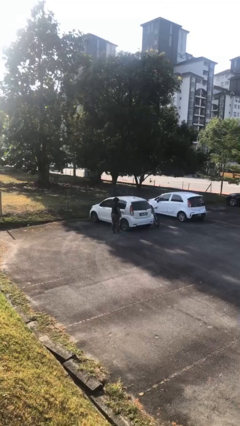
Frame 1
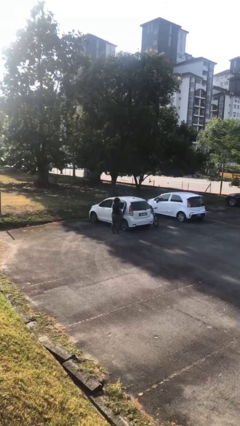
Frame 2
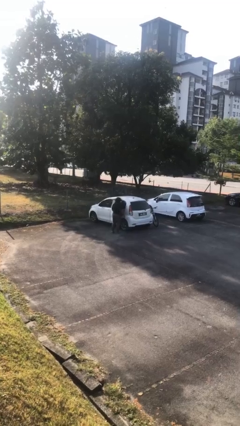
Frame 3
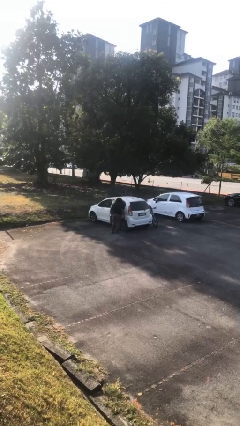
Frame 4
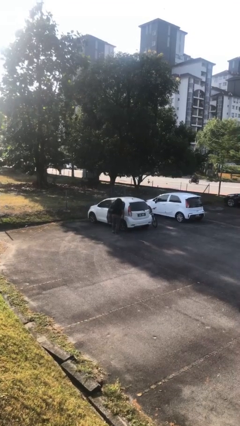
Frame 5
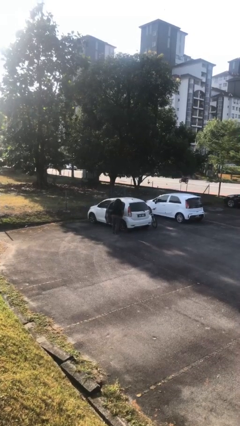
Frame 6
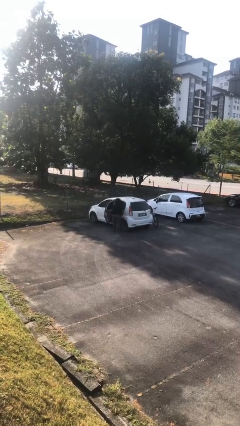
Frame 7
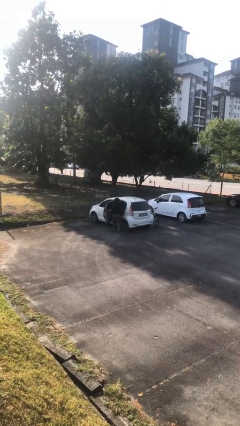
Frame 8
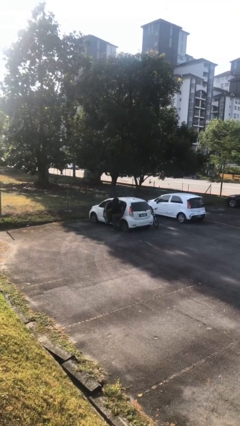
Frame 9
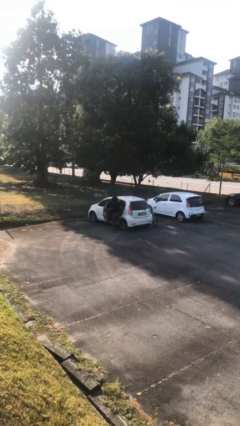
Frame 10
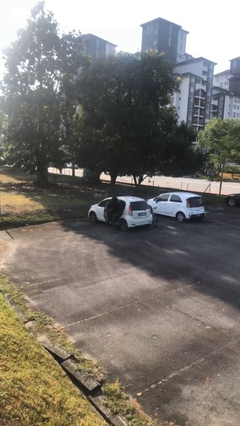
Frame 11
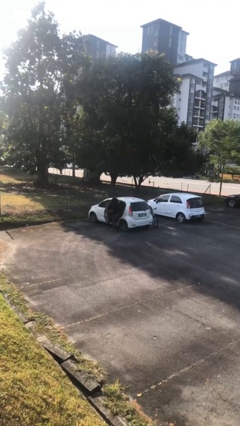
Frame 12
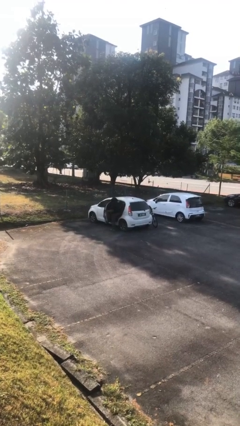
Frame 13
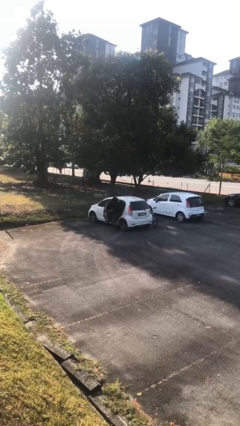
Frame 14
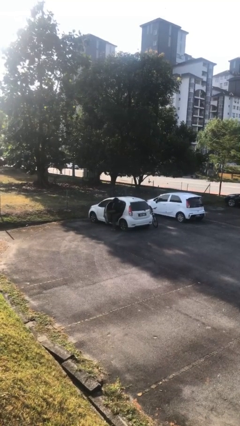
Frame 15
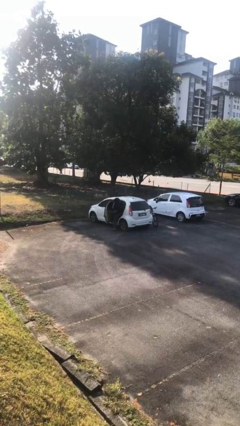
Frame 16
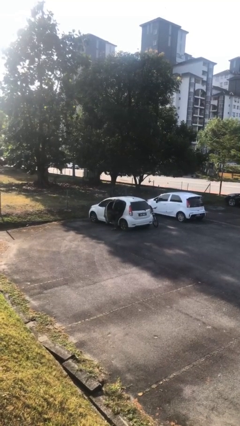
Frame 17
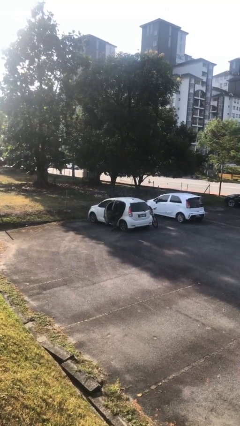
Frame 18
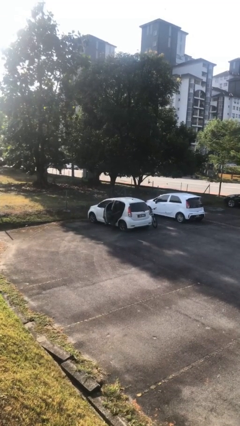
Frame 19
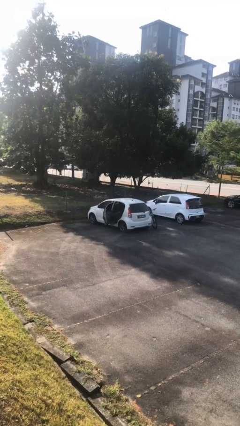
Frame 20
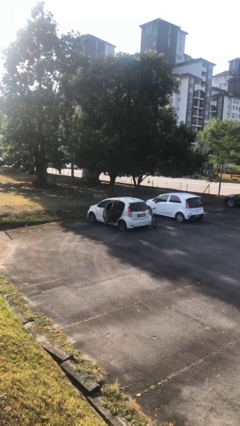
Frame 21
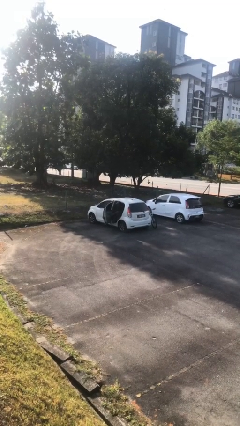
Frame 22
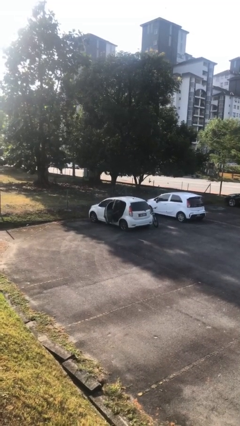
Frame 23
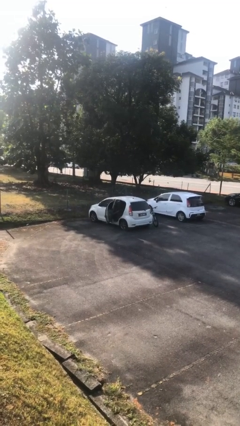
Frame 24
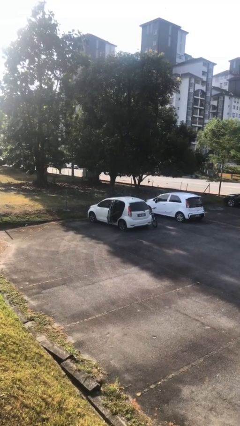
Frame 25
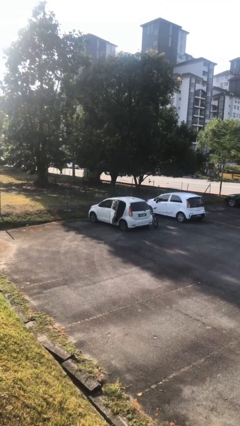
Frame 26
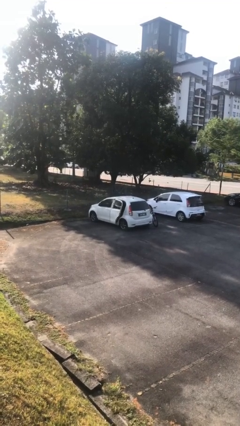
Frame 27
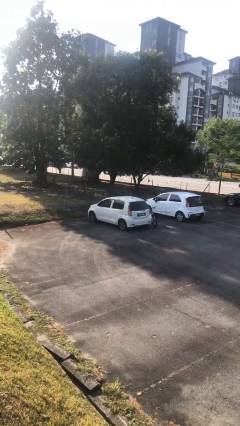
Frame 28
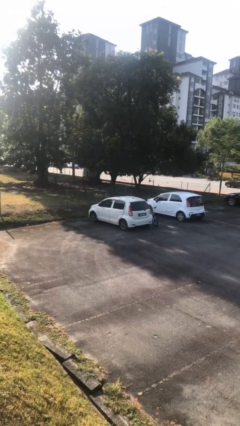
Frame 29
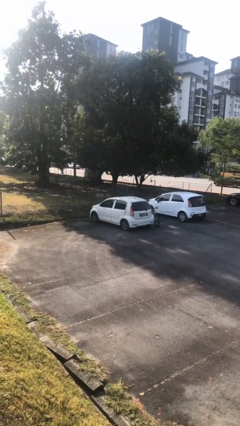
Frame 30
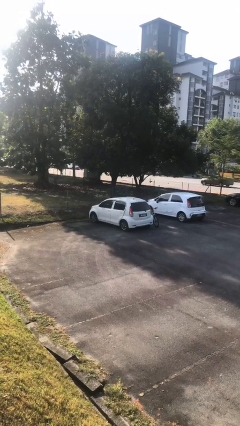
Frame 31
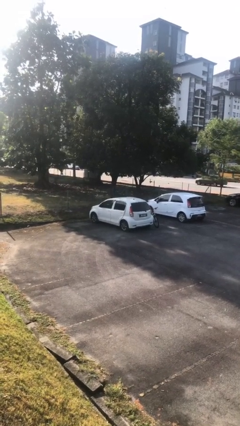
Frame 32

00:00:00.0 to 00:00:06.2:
car picks up person

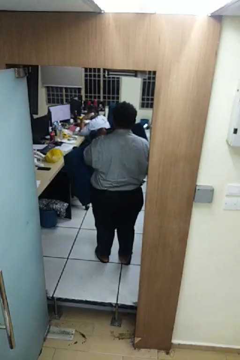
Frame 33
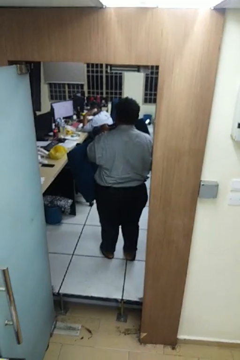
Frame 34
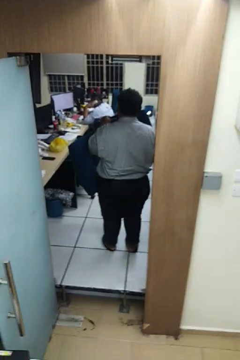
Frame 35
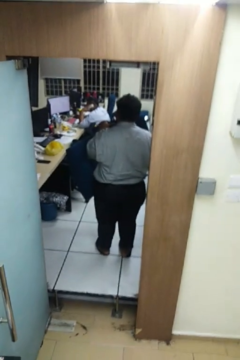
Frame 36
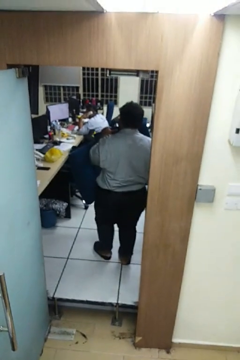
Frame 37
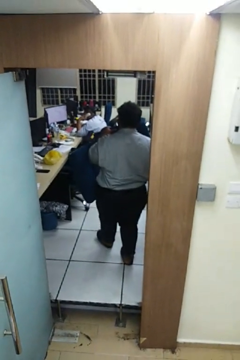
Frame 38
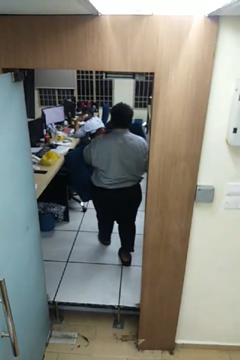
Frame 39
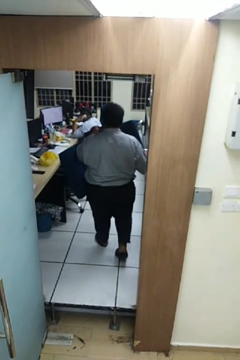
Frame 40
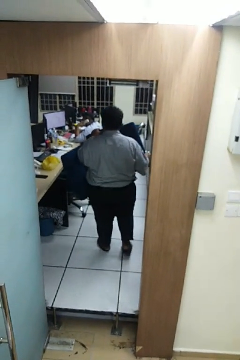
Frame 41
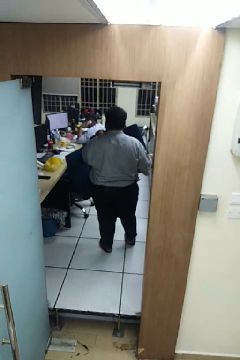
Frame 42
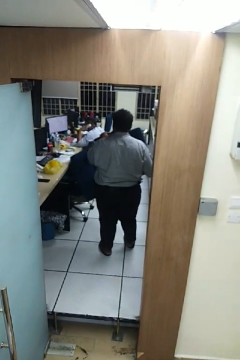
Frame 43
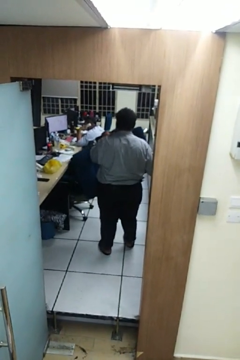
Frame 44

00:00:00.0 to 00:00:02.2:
person carries furniture

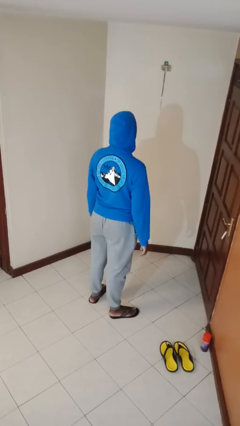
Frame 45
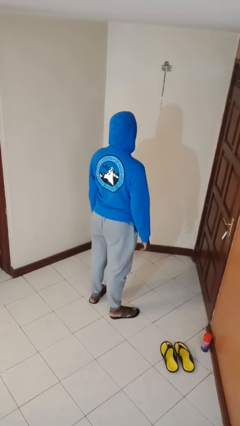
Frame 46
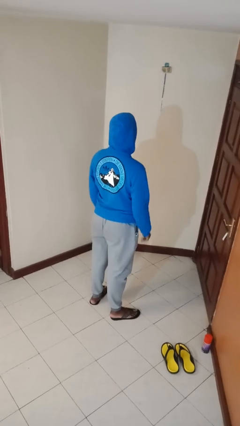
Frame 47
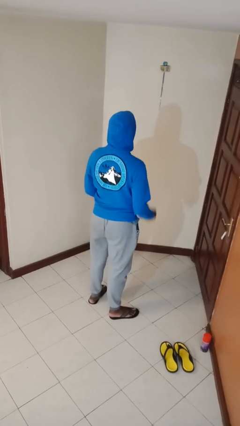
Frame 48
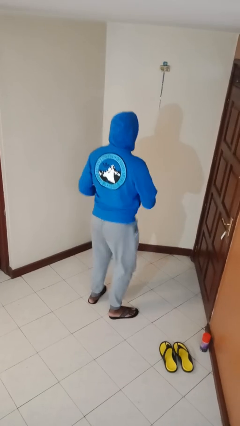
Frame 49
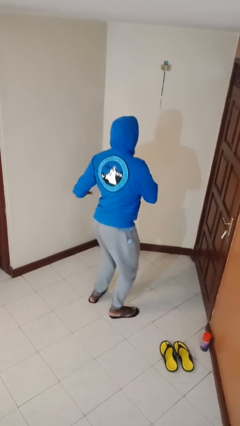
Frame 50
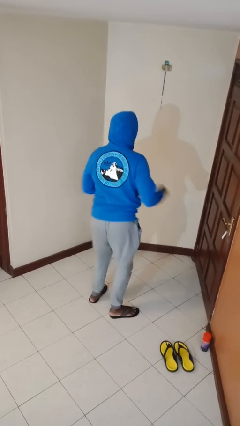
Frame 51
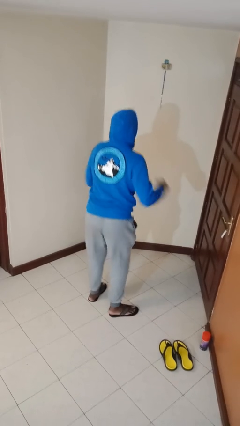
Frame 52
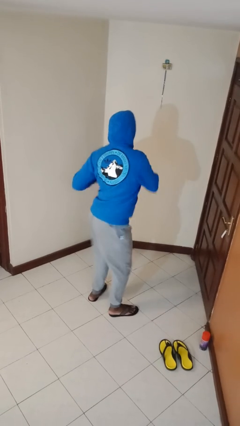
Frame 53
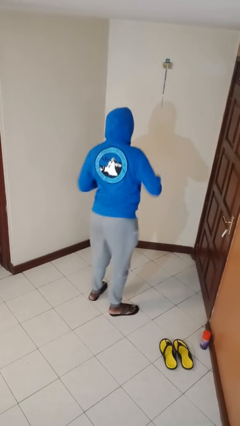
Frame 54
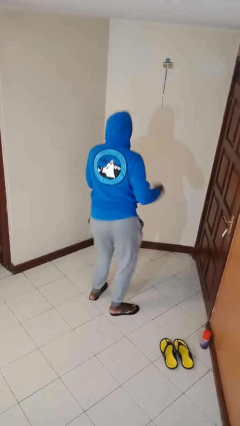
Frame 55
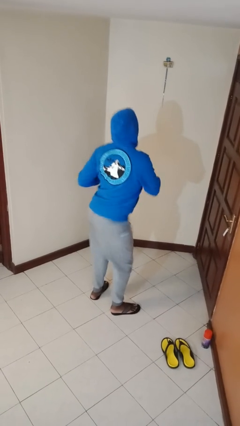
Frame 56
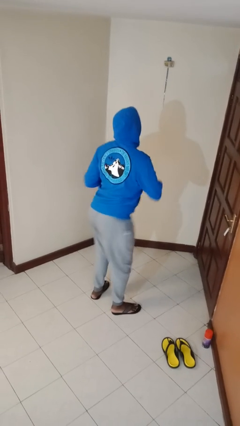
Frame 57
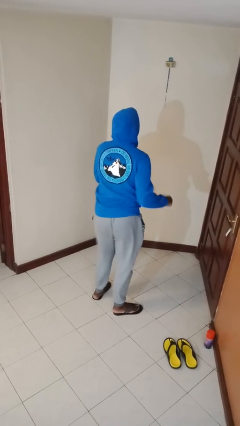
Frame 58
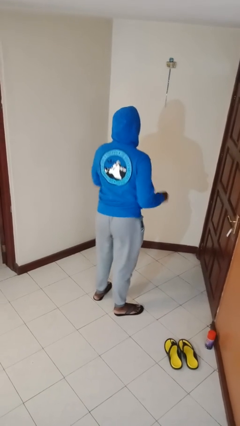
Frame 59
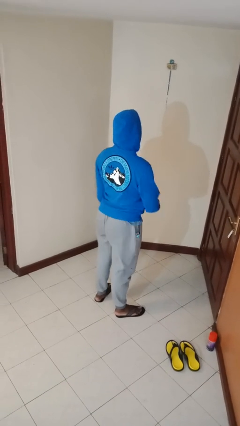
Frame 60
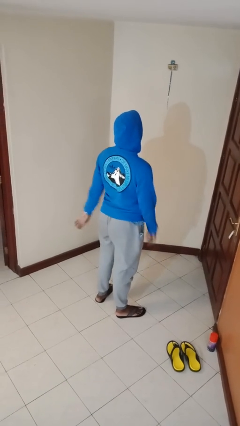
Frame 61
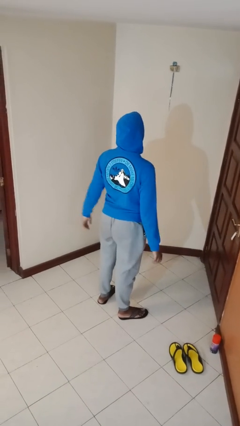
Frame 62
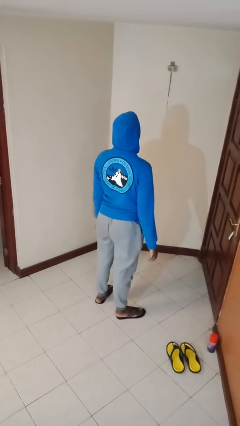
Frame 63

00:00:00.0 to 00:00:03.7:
person wiggles hips

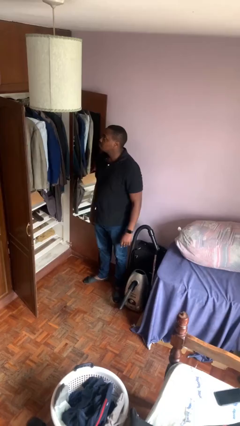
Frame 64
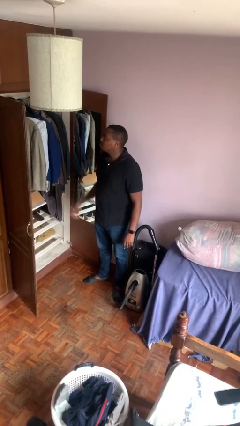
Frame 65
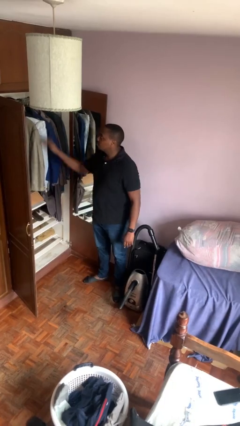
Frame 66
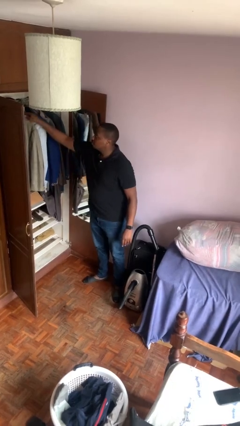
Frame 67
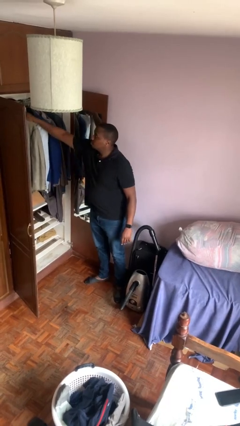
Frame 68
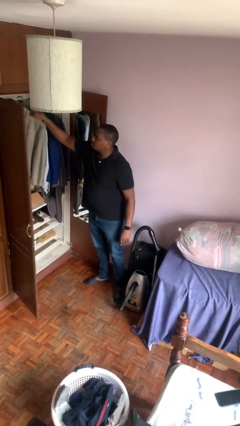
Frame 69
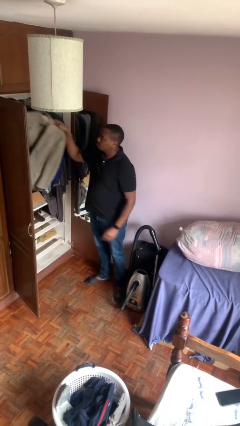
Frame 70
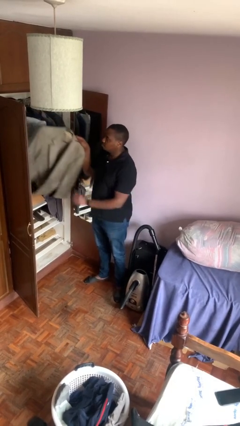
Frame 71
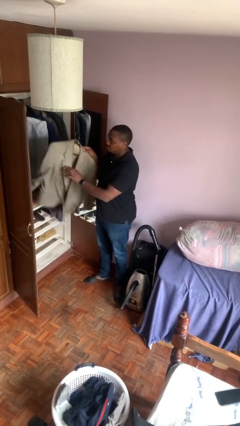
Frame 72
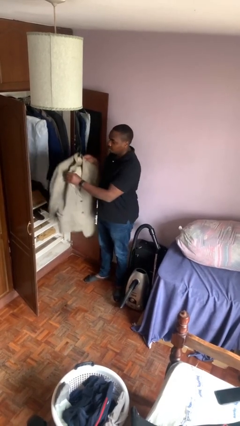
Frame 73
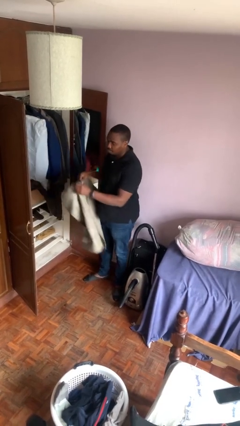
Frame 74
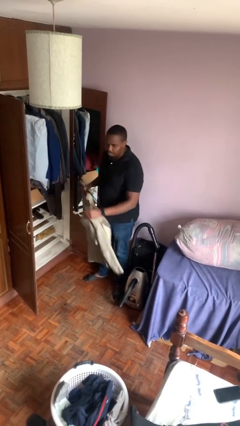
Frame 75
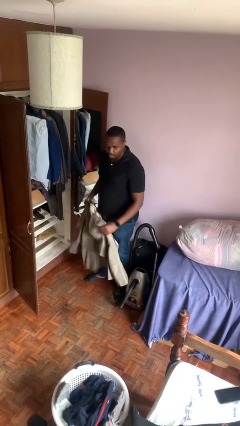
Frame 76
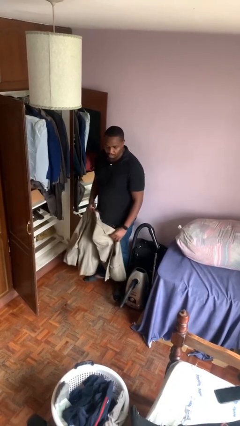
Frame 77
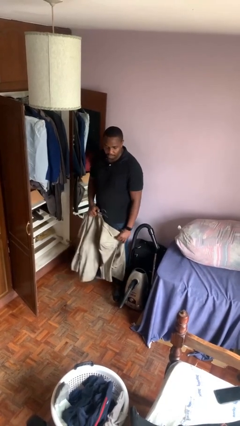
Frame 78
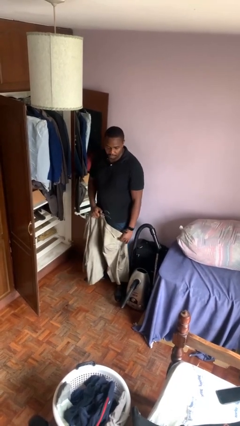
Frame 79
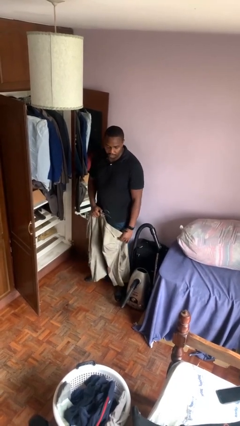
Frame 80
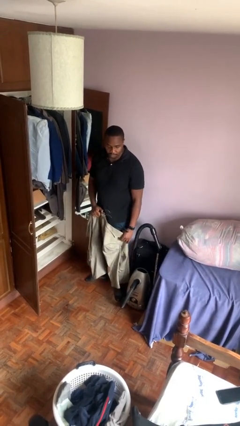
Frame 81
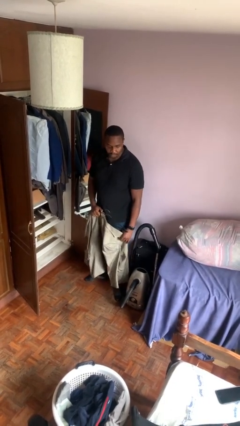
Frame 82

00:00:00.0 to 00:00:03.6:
person takes clothes from closet

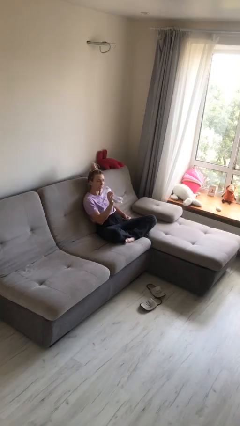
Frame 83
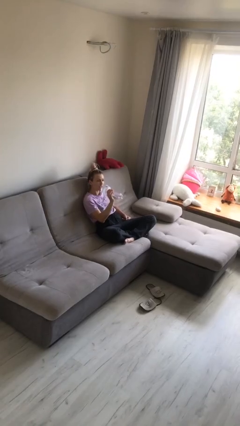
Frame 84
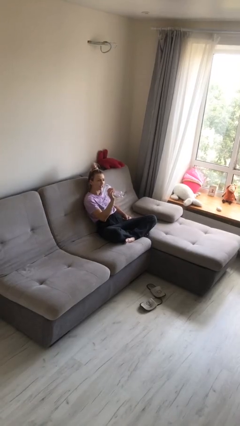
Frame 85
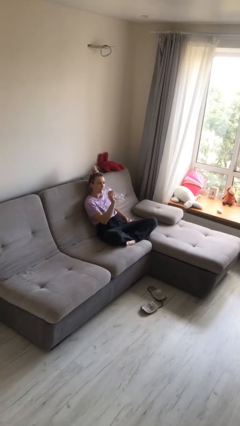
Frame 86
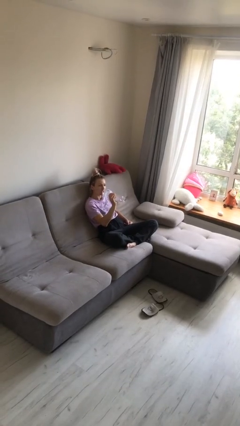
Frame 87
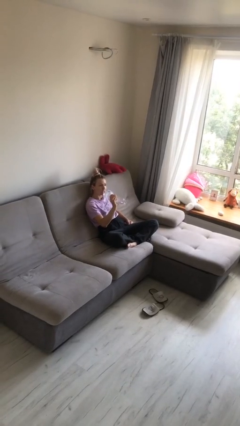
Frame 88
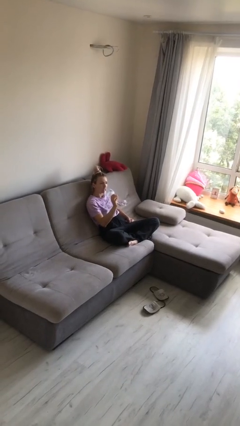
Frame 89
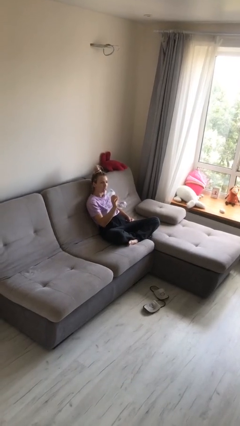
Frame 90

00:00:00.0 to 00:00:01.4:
person drinks from bottle

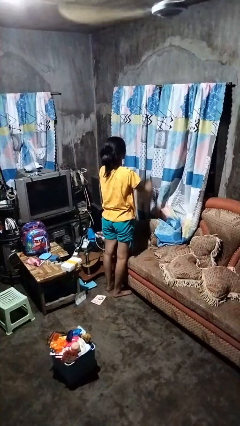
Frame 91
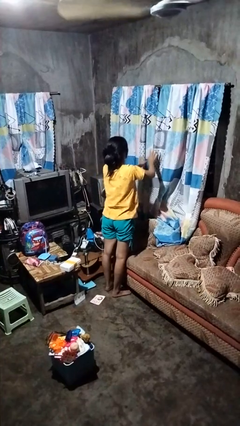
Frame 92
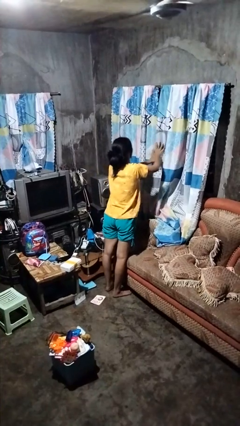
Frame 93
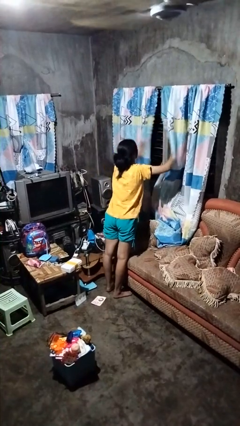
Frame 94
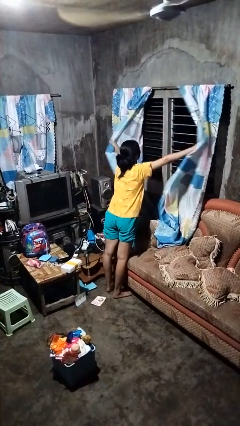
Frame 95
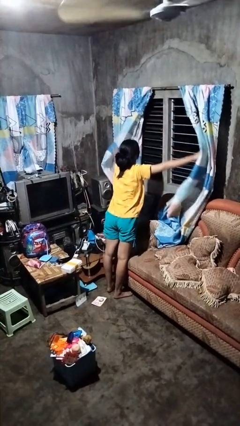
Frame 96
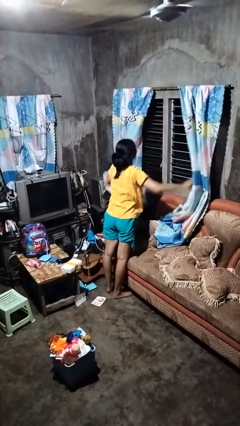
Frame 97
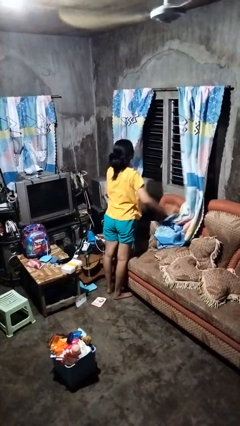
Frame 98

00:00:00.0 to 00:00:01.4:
person opens curtains
